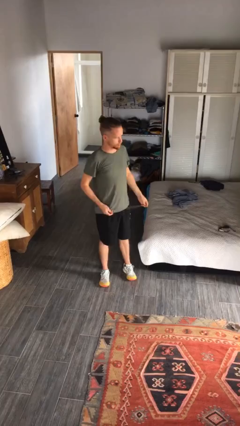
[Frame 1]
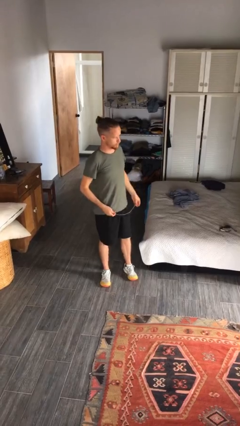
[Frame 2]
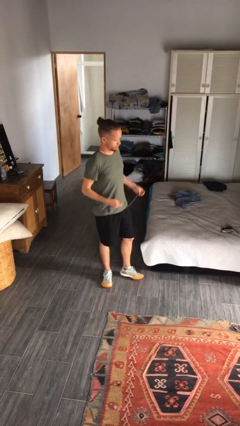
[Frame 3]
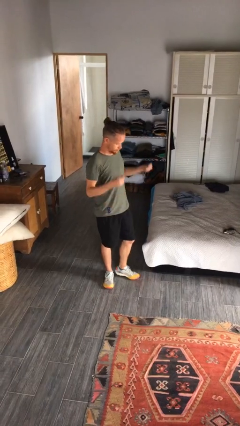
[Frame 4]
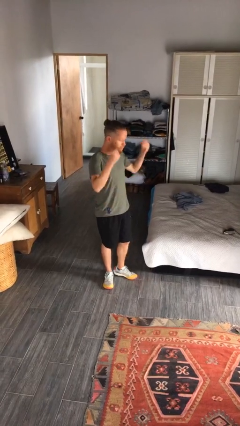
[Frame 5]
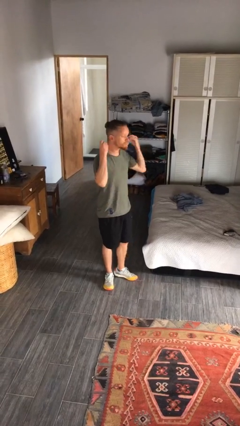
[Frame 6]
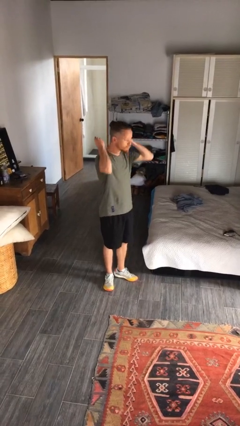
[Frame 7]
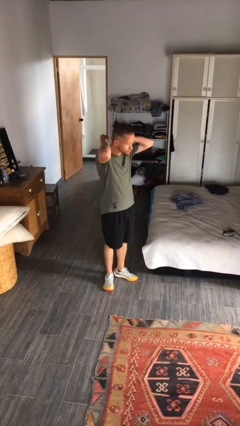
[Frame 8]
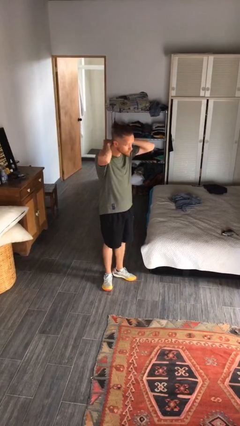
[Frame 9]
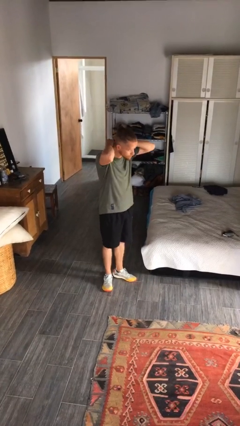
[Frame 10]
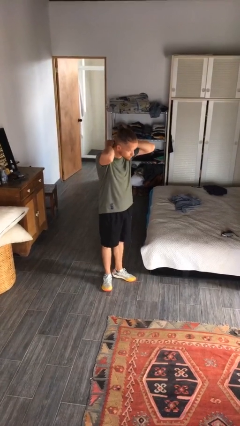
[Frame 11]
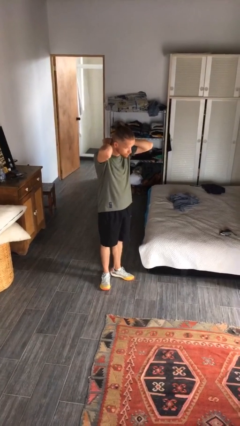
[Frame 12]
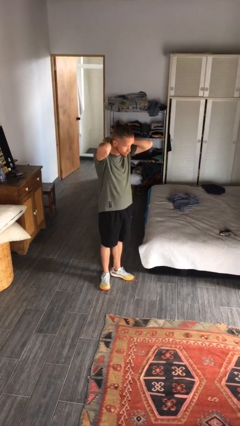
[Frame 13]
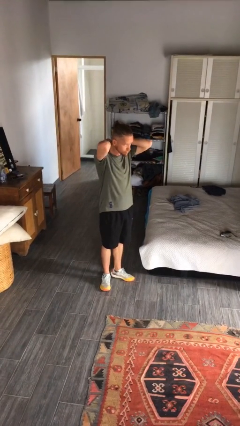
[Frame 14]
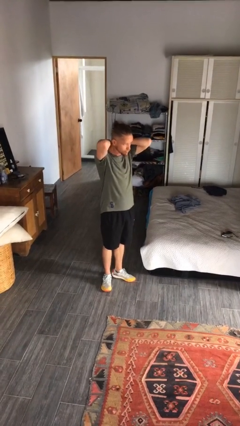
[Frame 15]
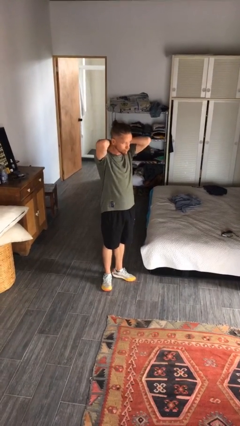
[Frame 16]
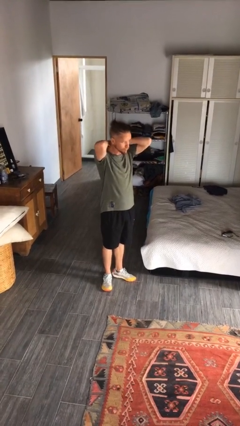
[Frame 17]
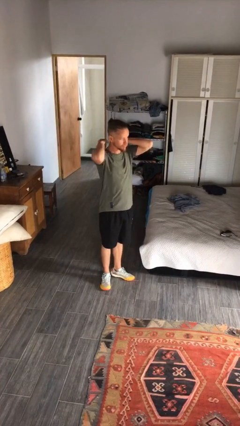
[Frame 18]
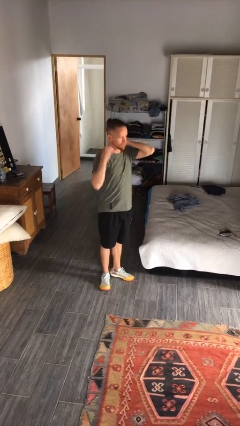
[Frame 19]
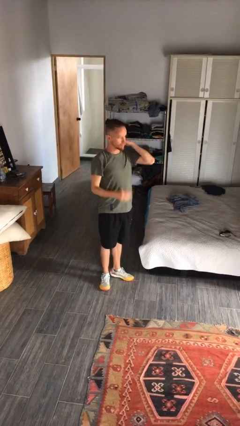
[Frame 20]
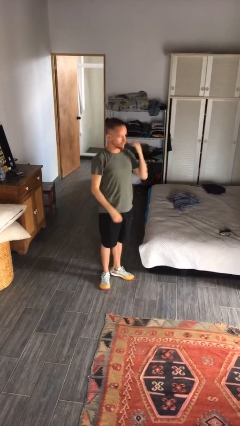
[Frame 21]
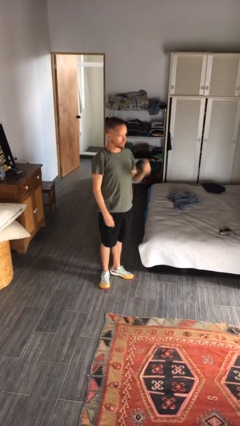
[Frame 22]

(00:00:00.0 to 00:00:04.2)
person puts on necklace

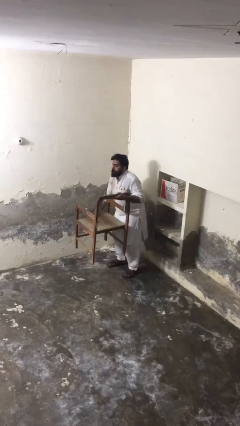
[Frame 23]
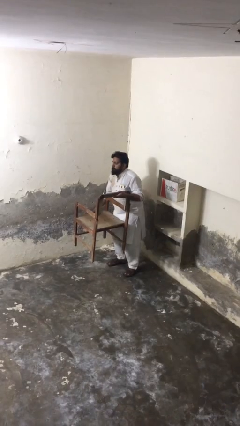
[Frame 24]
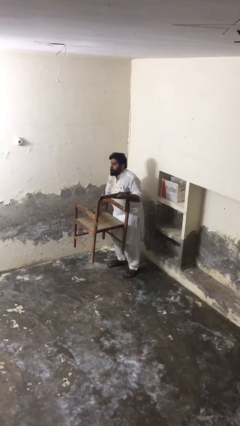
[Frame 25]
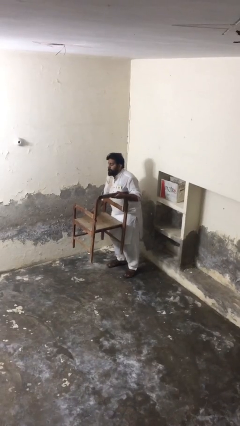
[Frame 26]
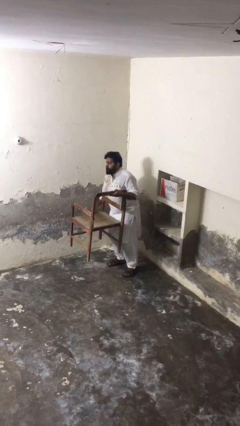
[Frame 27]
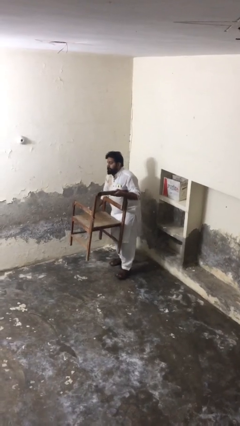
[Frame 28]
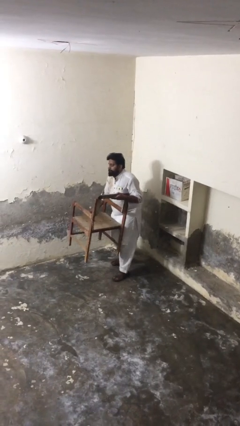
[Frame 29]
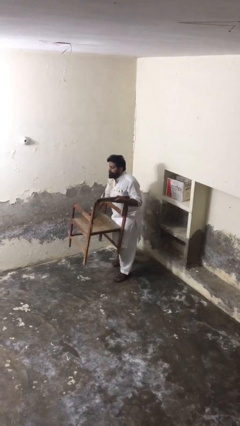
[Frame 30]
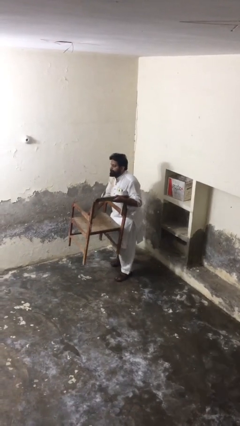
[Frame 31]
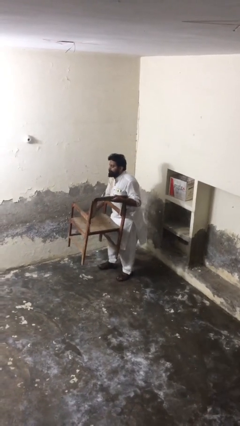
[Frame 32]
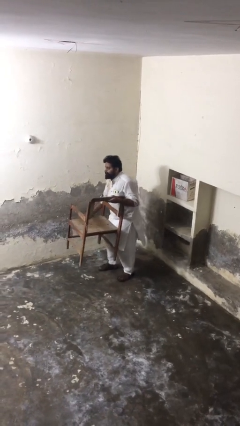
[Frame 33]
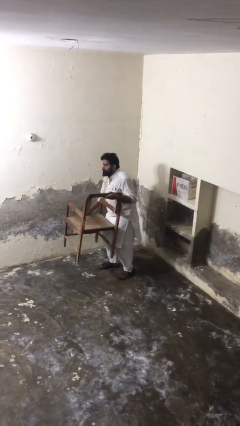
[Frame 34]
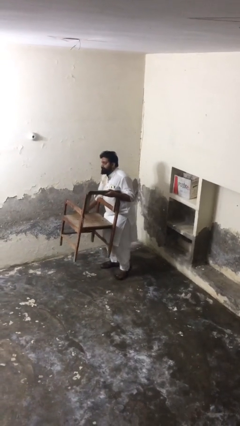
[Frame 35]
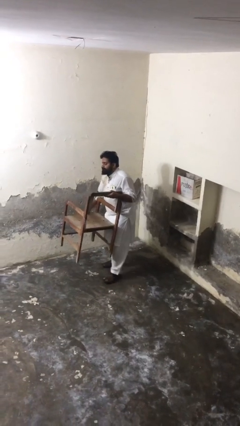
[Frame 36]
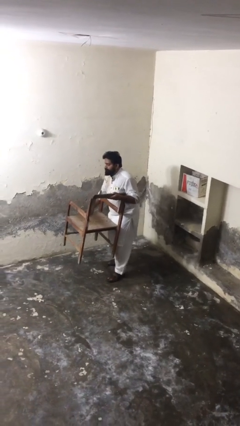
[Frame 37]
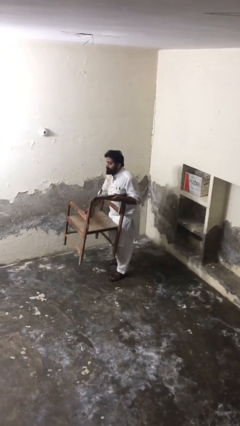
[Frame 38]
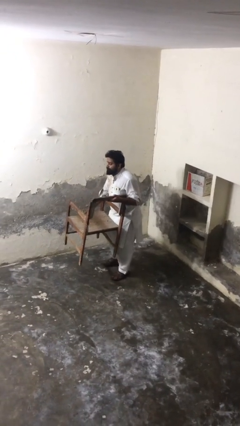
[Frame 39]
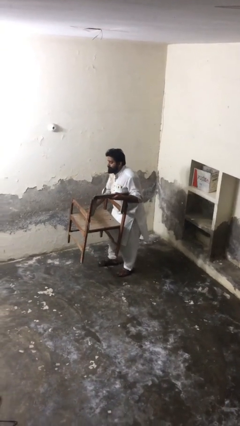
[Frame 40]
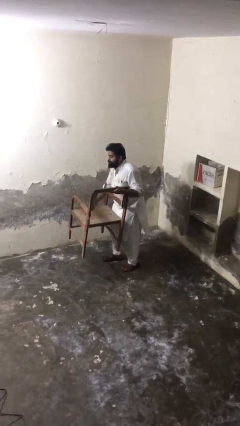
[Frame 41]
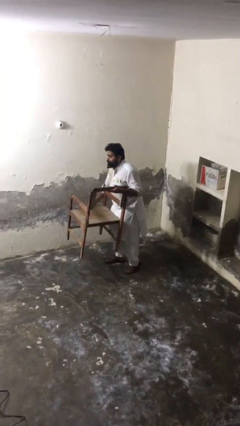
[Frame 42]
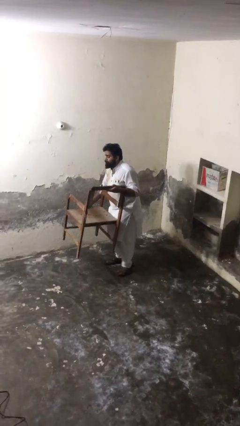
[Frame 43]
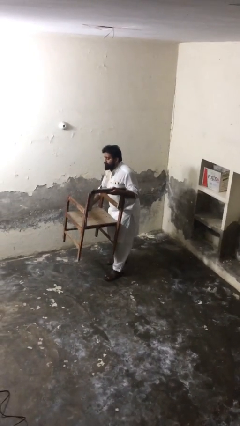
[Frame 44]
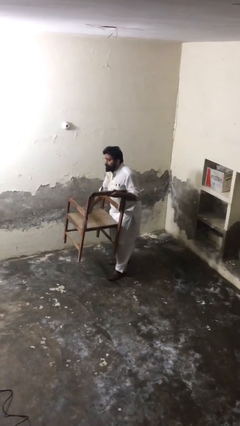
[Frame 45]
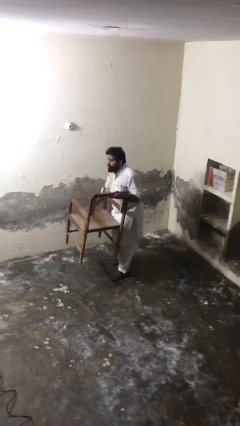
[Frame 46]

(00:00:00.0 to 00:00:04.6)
person carries heavy object

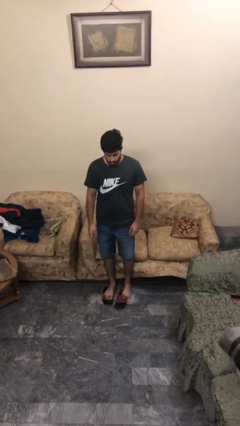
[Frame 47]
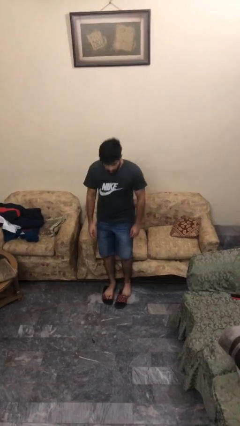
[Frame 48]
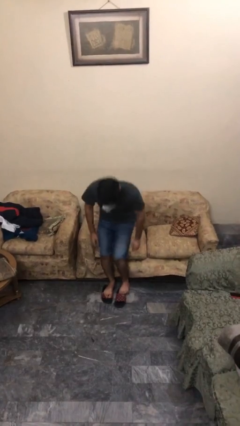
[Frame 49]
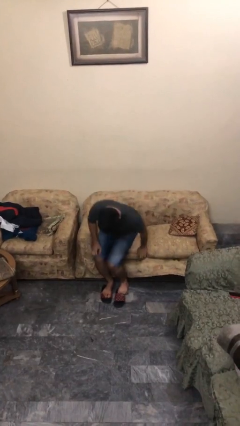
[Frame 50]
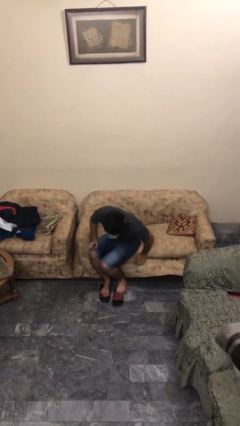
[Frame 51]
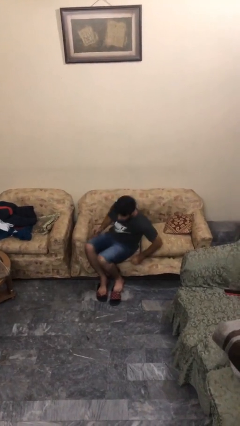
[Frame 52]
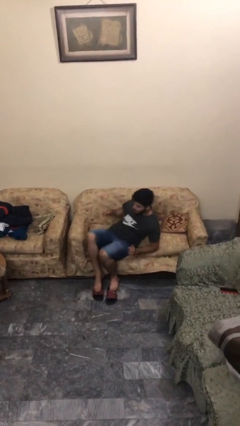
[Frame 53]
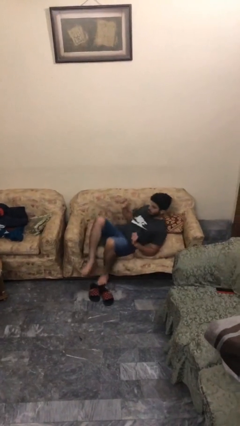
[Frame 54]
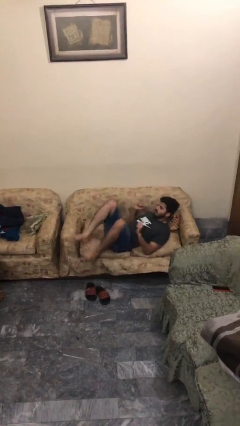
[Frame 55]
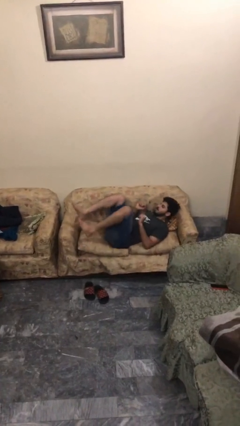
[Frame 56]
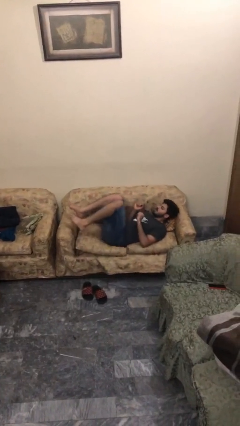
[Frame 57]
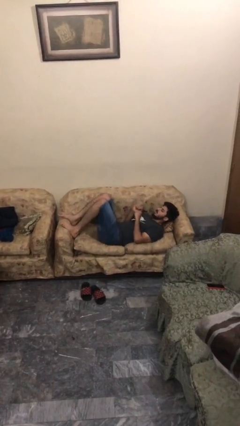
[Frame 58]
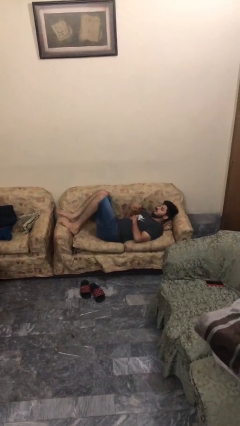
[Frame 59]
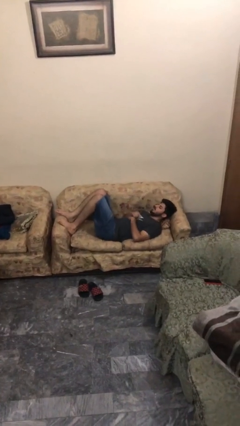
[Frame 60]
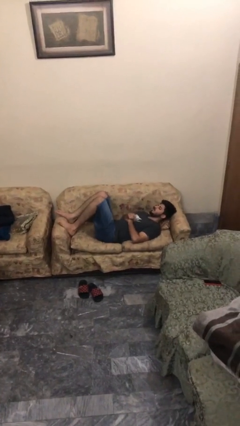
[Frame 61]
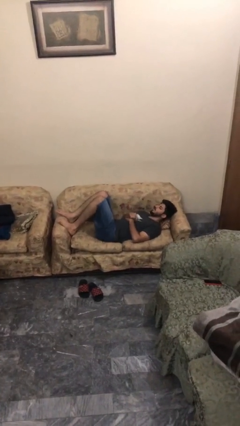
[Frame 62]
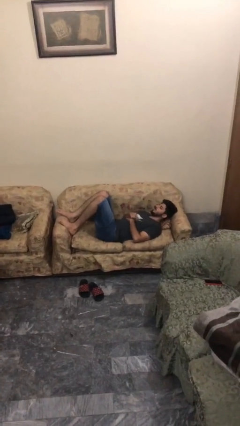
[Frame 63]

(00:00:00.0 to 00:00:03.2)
person lies down on couch

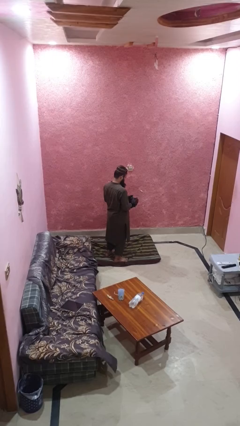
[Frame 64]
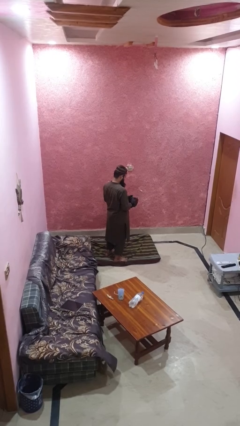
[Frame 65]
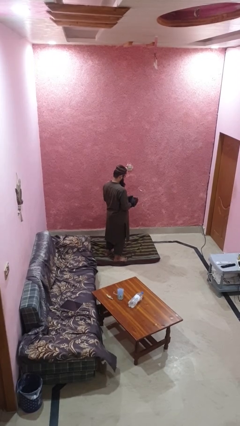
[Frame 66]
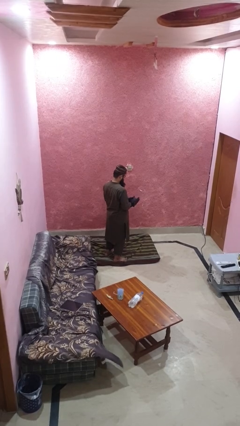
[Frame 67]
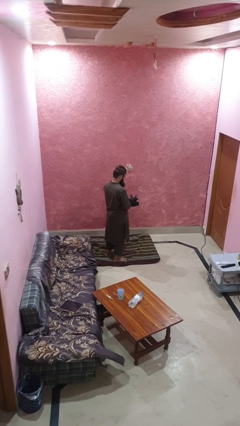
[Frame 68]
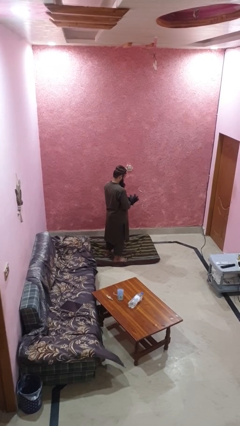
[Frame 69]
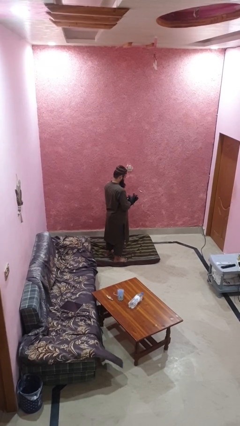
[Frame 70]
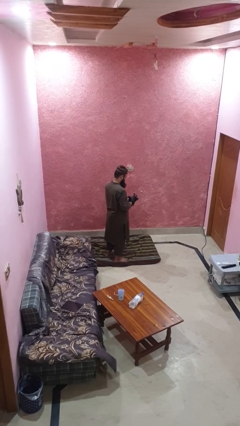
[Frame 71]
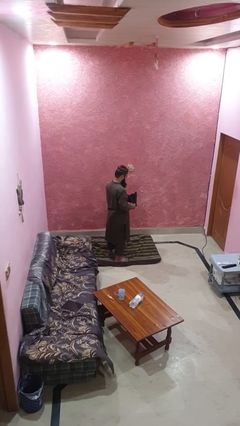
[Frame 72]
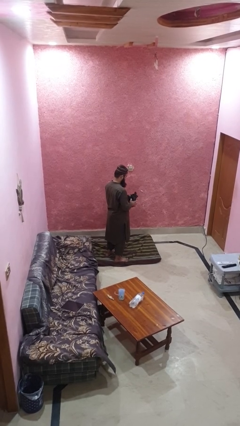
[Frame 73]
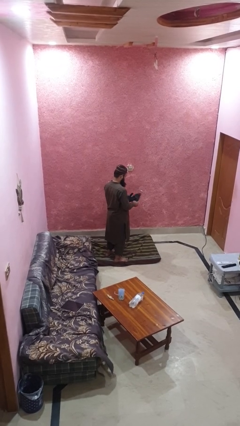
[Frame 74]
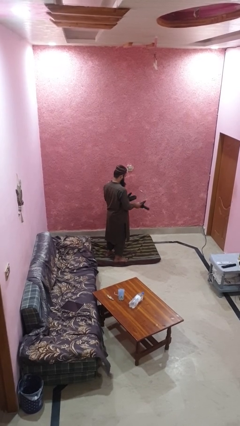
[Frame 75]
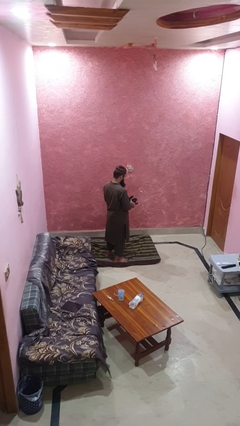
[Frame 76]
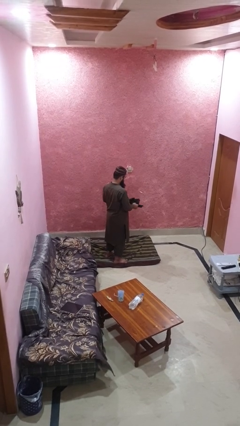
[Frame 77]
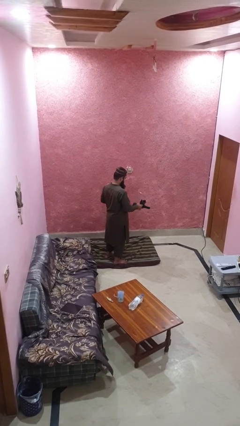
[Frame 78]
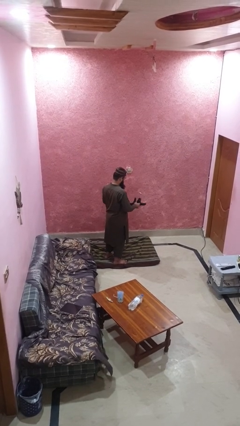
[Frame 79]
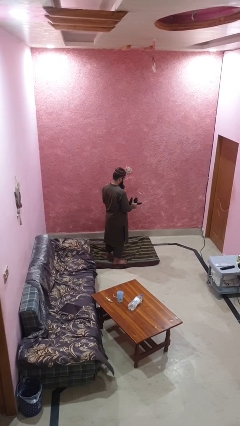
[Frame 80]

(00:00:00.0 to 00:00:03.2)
person takes off gloves

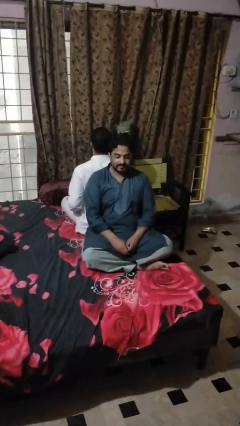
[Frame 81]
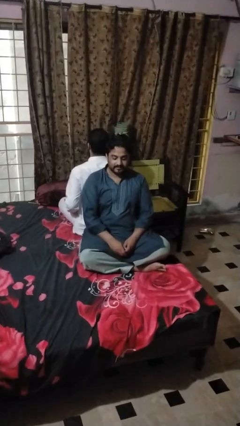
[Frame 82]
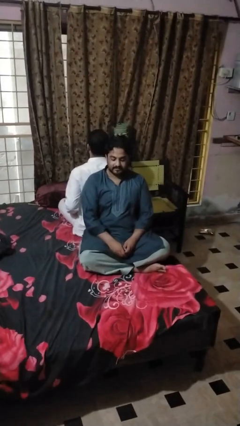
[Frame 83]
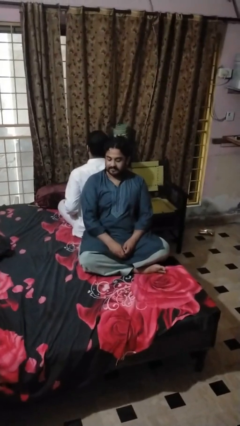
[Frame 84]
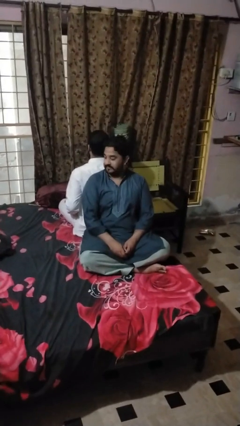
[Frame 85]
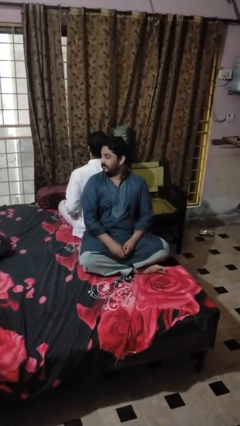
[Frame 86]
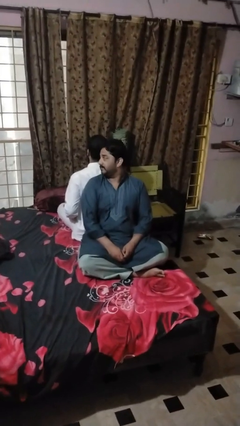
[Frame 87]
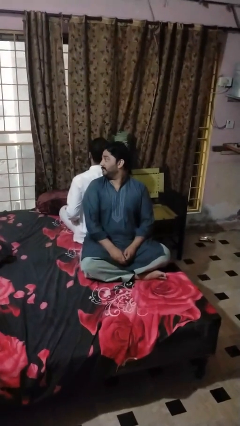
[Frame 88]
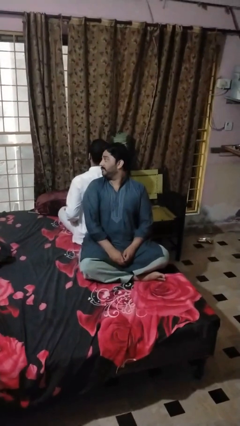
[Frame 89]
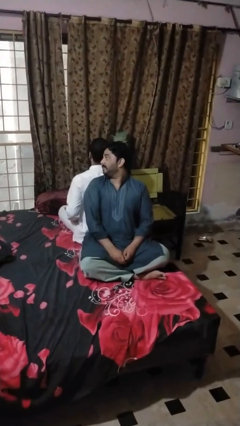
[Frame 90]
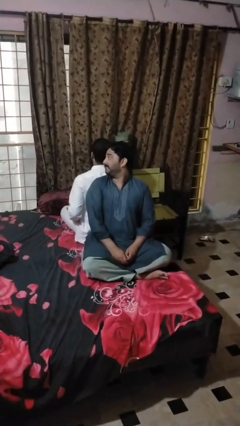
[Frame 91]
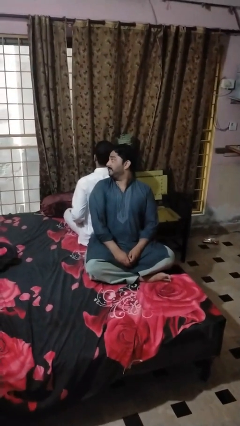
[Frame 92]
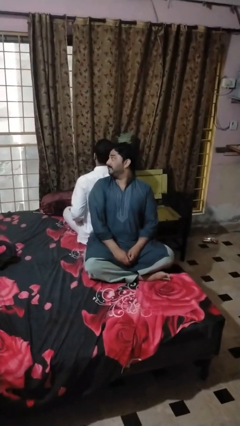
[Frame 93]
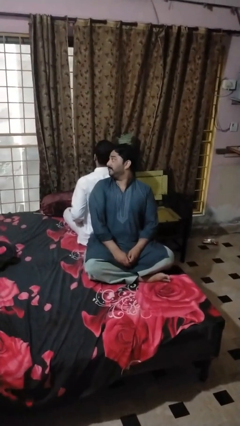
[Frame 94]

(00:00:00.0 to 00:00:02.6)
person looks over shoulder
